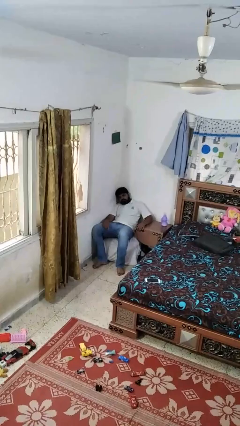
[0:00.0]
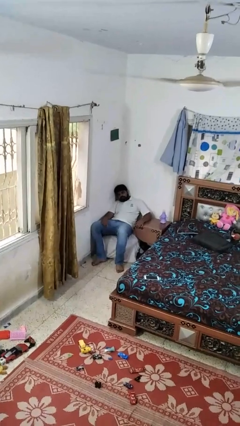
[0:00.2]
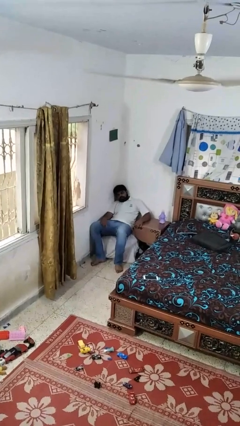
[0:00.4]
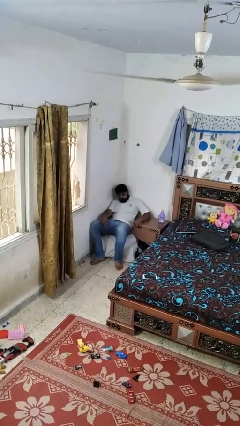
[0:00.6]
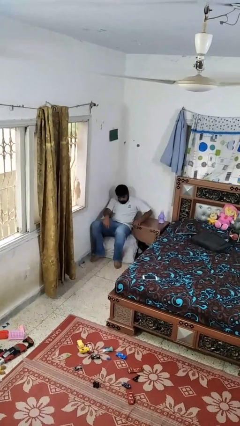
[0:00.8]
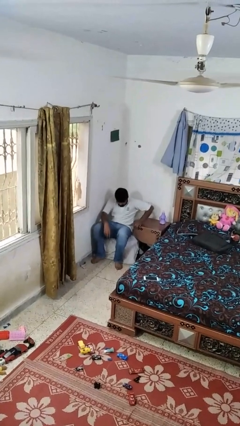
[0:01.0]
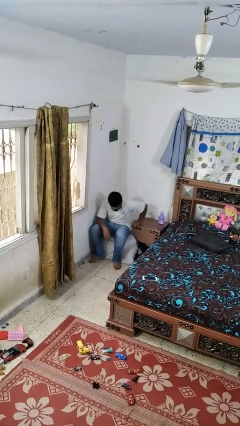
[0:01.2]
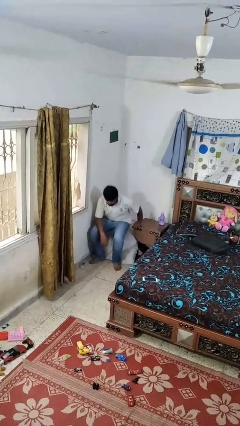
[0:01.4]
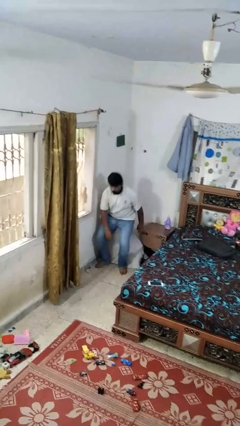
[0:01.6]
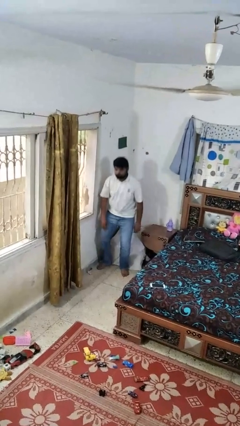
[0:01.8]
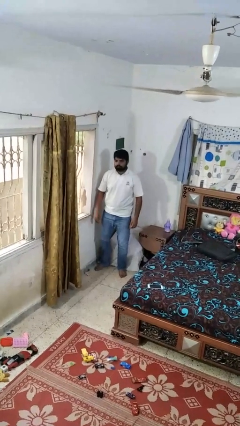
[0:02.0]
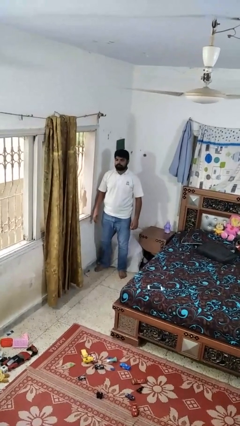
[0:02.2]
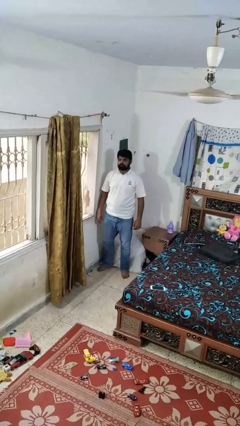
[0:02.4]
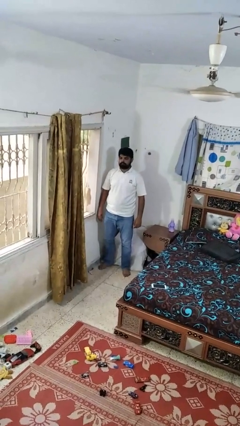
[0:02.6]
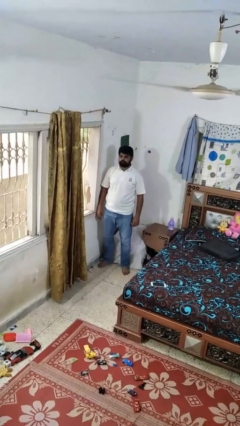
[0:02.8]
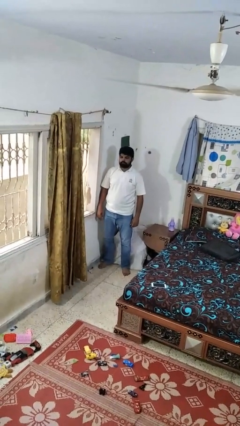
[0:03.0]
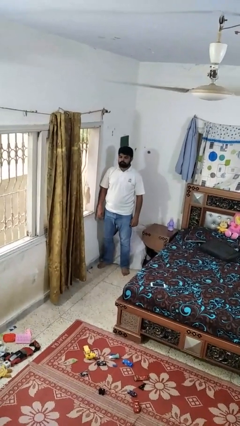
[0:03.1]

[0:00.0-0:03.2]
person stands up

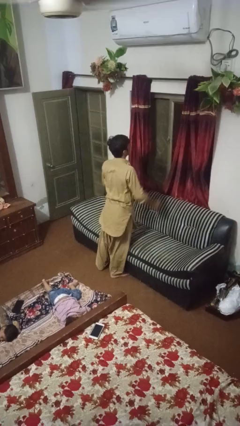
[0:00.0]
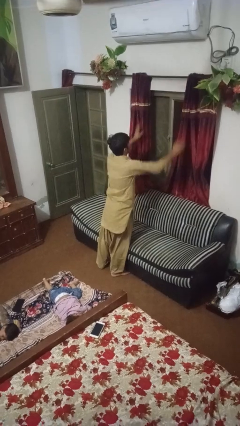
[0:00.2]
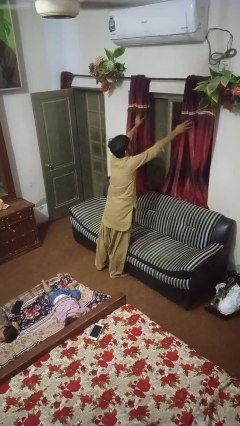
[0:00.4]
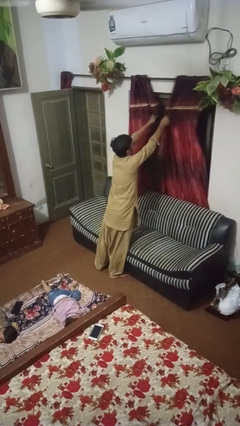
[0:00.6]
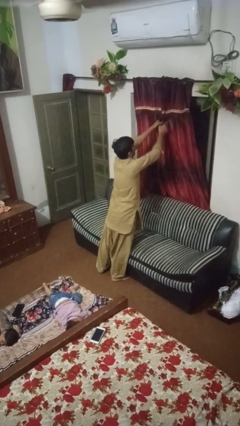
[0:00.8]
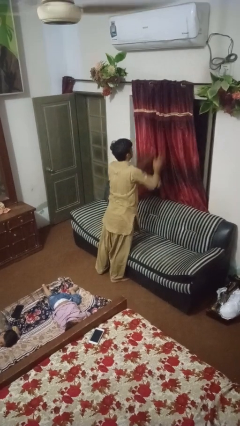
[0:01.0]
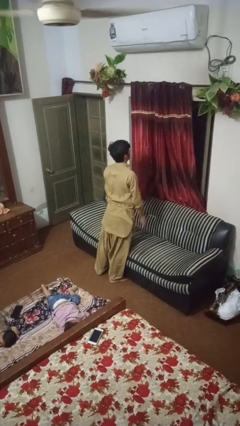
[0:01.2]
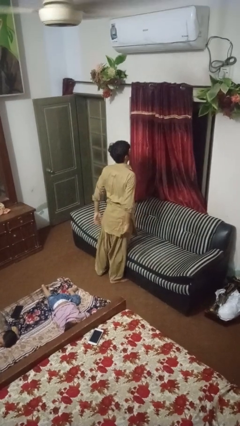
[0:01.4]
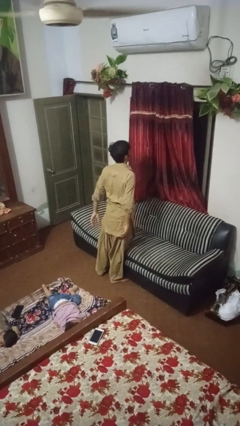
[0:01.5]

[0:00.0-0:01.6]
person closes curtains

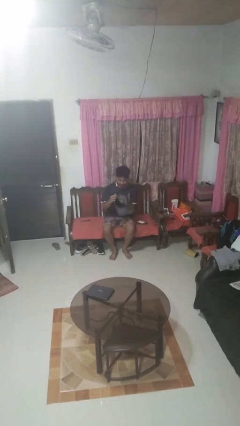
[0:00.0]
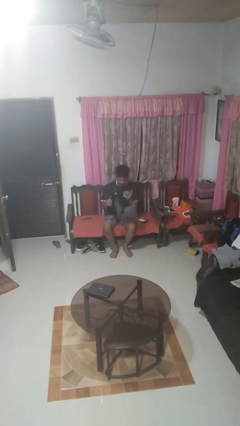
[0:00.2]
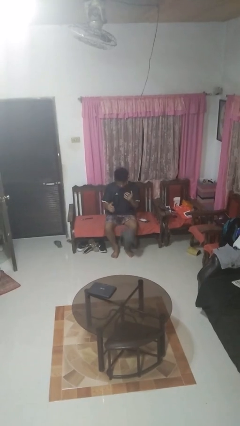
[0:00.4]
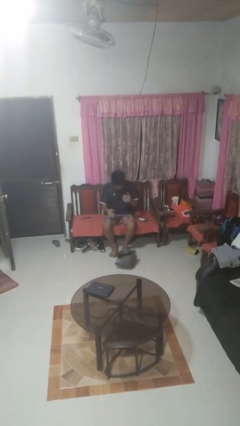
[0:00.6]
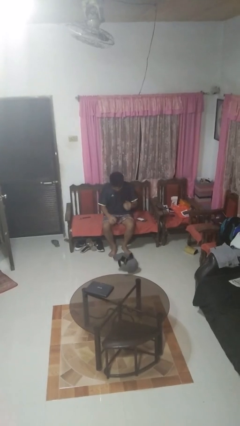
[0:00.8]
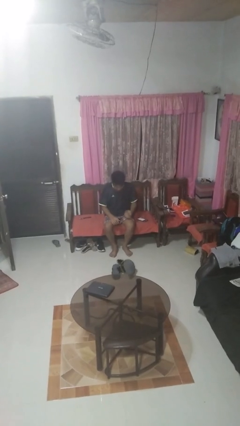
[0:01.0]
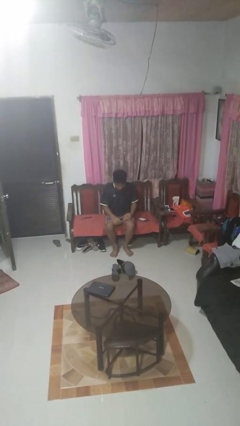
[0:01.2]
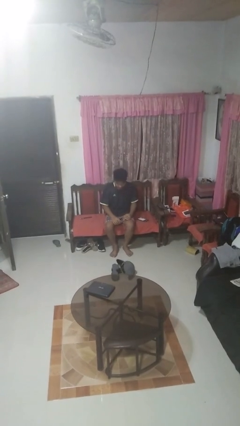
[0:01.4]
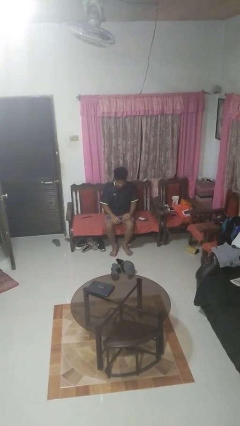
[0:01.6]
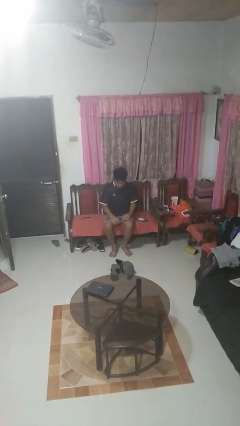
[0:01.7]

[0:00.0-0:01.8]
person drops object

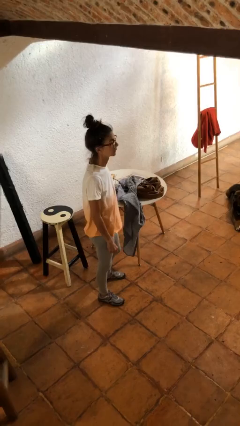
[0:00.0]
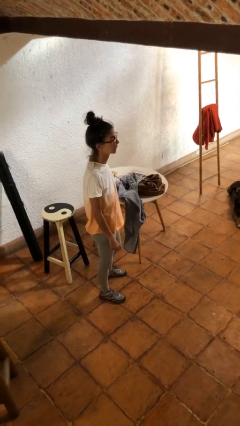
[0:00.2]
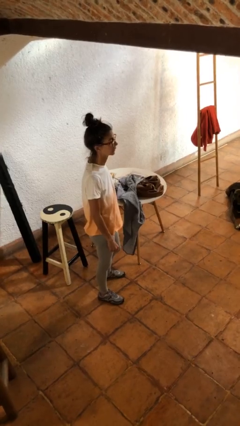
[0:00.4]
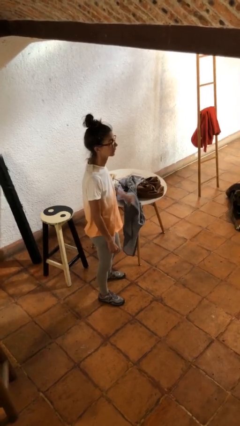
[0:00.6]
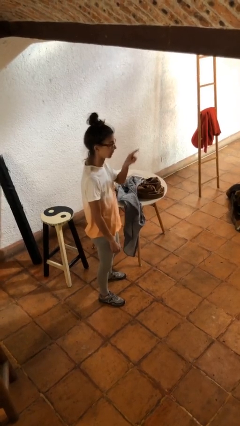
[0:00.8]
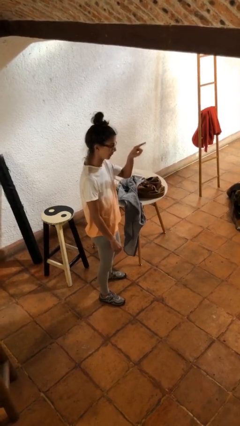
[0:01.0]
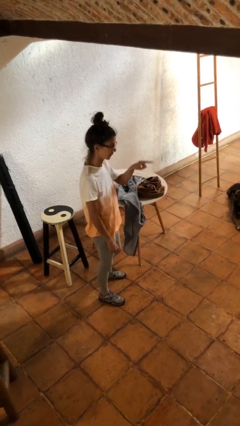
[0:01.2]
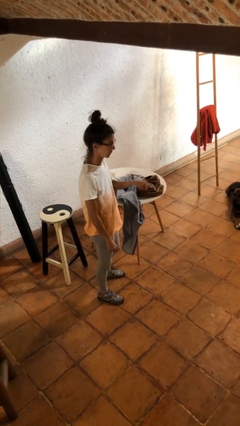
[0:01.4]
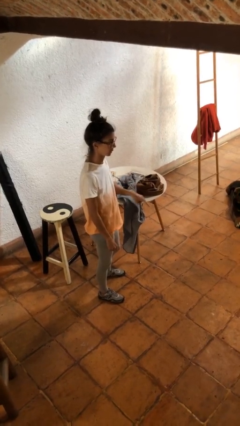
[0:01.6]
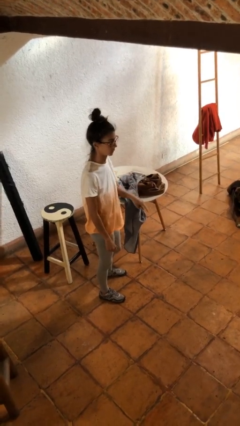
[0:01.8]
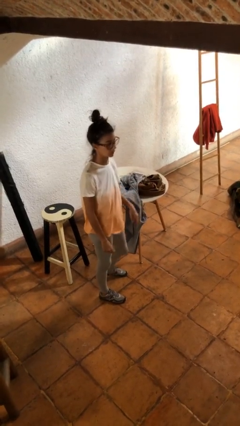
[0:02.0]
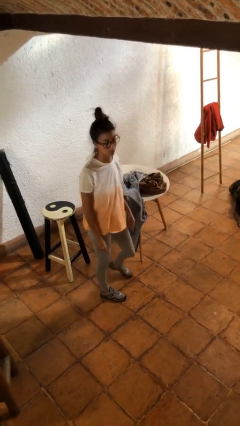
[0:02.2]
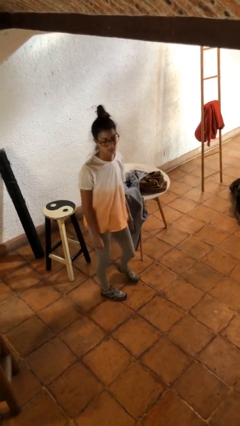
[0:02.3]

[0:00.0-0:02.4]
person gestures swipe down

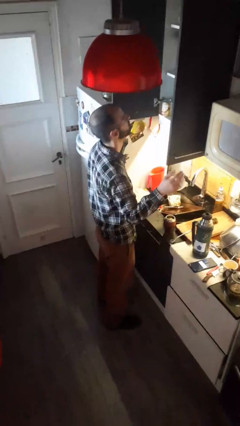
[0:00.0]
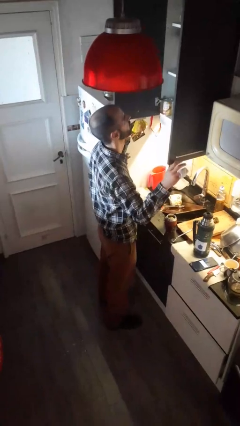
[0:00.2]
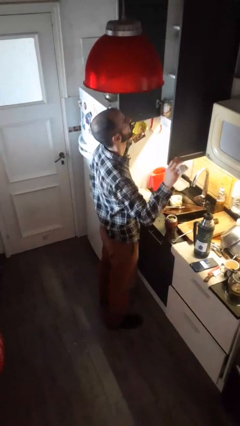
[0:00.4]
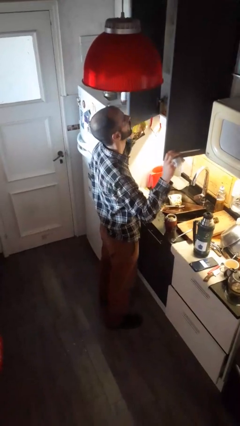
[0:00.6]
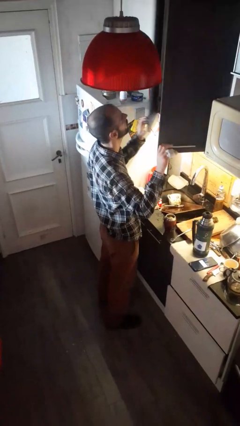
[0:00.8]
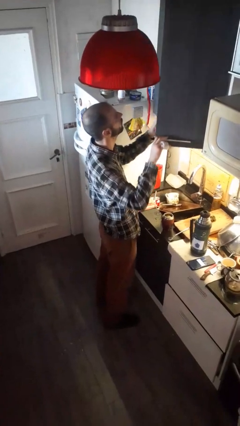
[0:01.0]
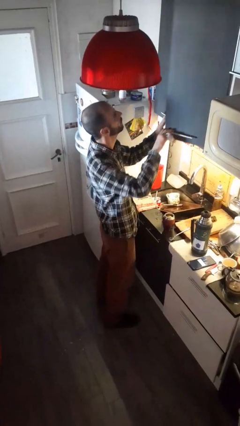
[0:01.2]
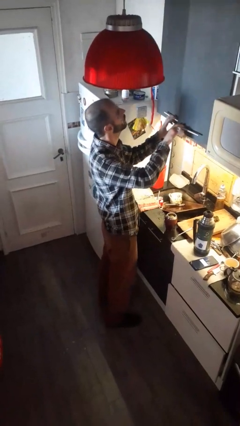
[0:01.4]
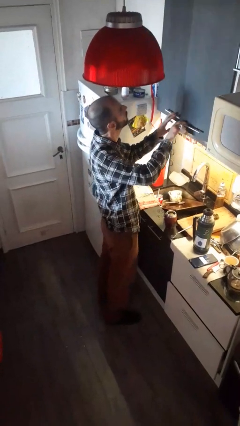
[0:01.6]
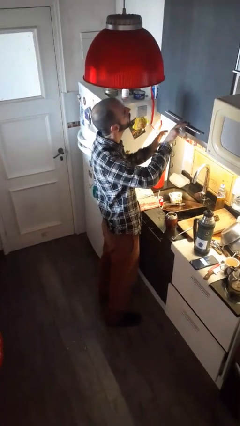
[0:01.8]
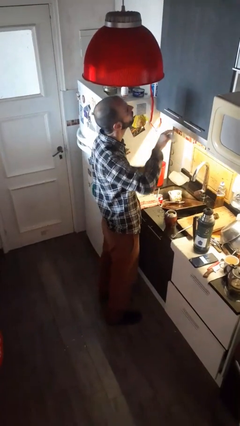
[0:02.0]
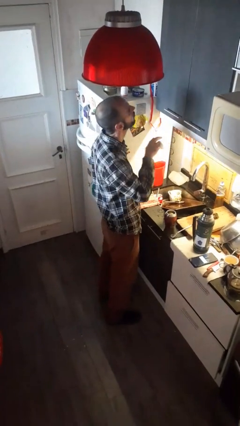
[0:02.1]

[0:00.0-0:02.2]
person closes kitchen drawer

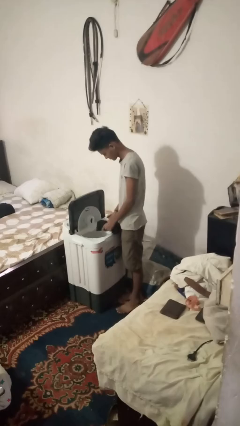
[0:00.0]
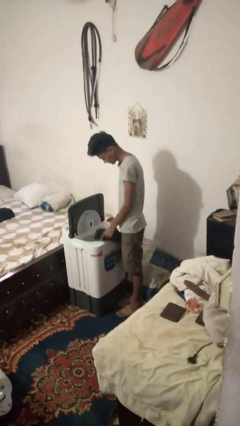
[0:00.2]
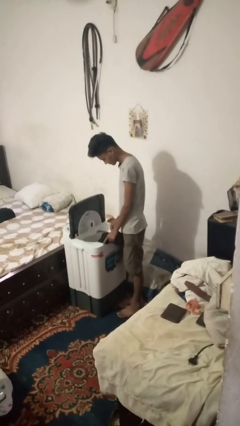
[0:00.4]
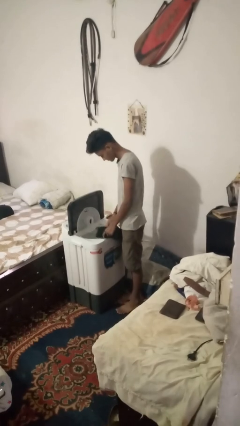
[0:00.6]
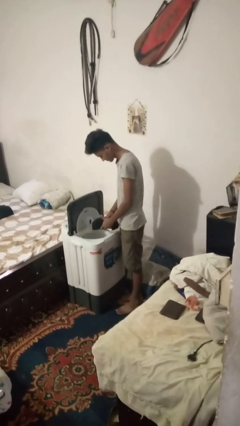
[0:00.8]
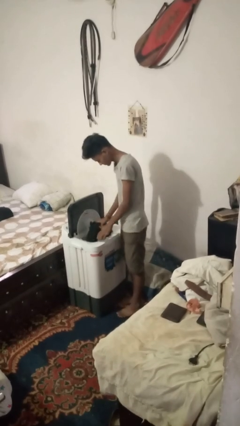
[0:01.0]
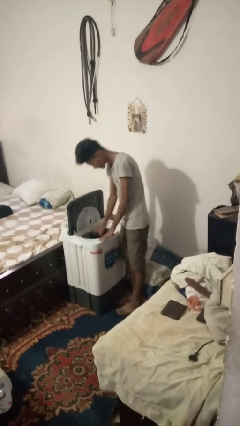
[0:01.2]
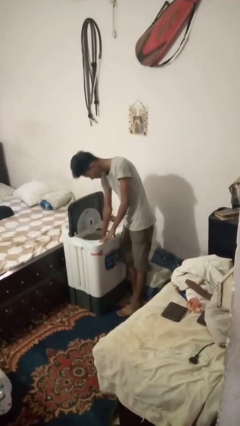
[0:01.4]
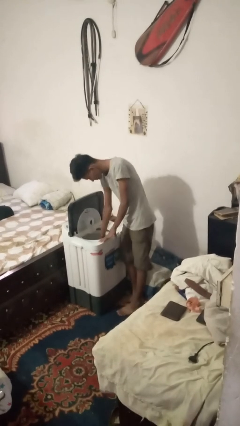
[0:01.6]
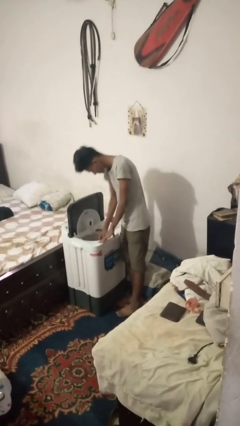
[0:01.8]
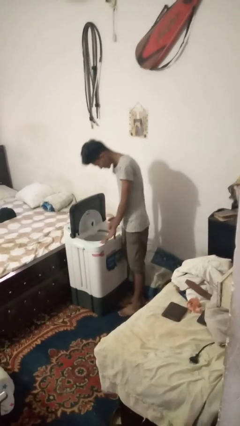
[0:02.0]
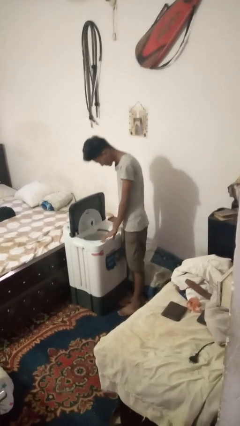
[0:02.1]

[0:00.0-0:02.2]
person loads clotheswasher

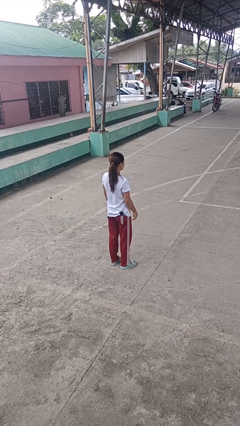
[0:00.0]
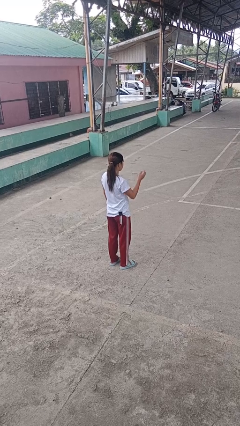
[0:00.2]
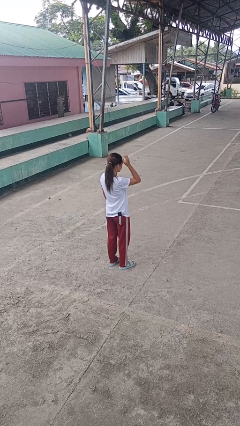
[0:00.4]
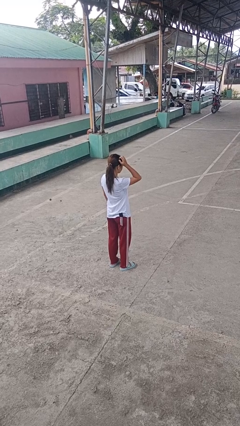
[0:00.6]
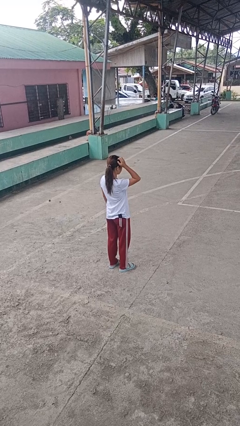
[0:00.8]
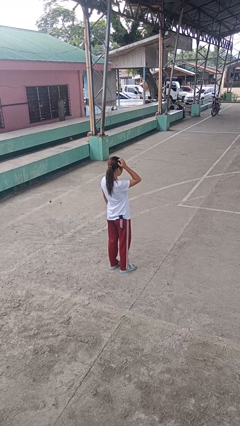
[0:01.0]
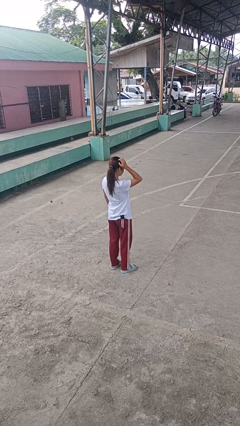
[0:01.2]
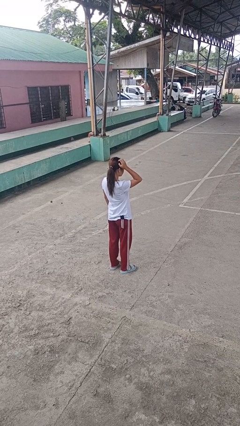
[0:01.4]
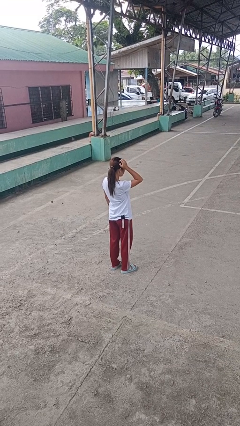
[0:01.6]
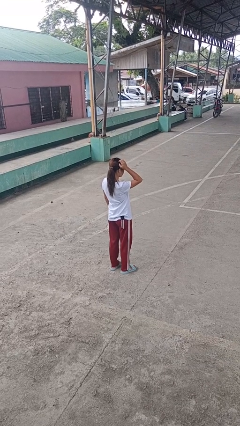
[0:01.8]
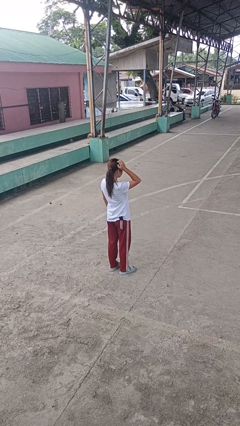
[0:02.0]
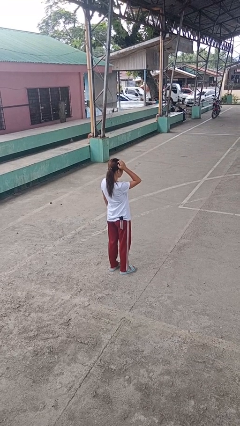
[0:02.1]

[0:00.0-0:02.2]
person scratches face

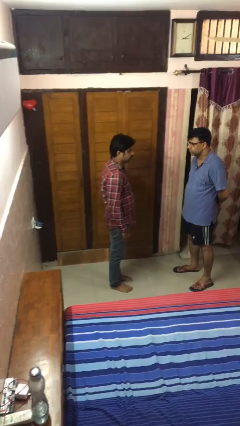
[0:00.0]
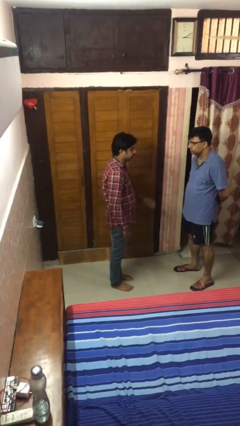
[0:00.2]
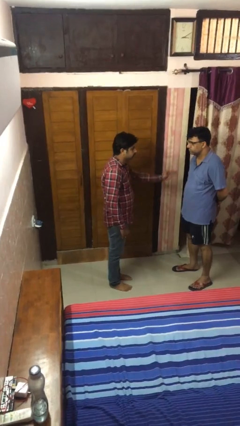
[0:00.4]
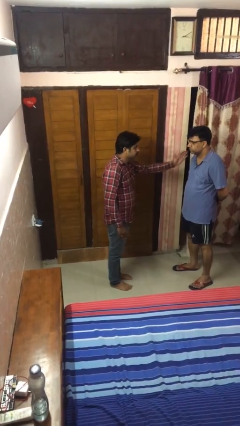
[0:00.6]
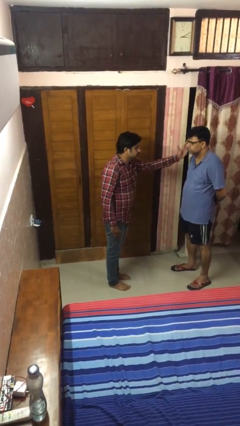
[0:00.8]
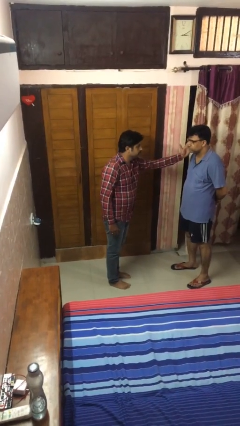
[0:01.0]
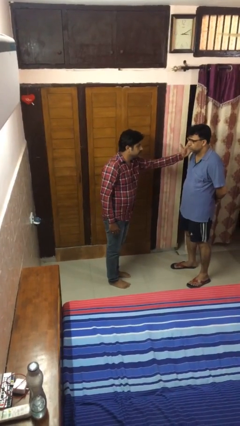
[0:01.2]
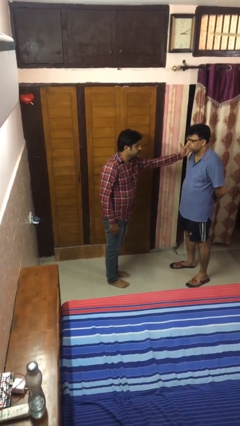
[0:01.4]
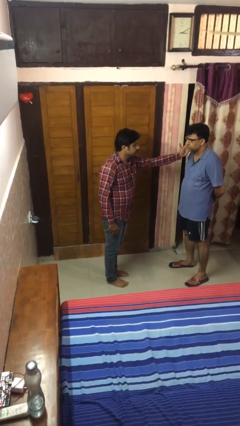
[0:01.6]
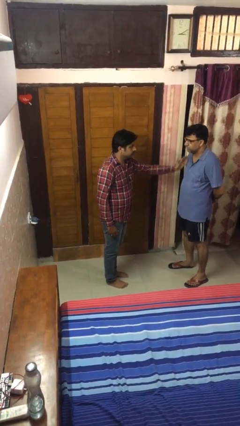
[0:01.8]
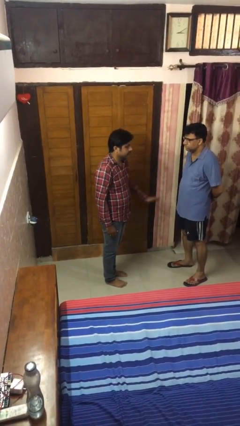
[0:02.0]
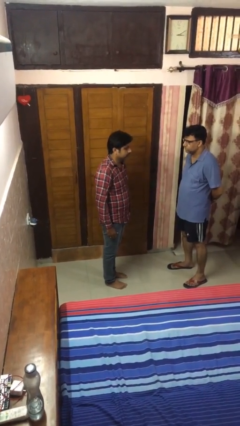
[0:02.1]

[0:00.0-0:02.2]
person touches face of person
